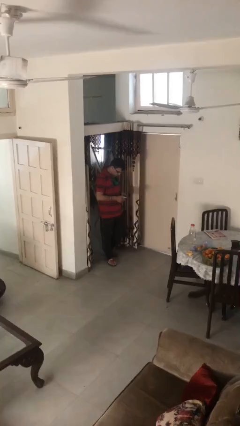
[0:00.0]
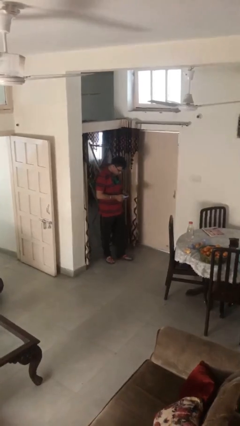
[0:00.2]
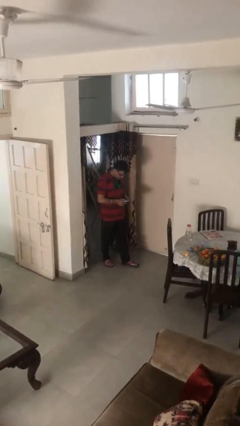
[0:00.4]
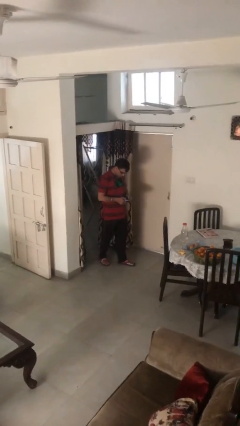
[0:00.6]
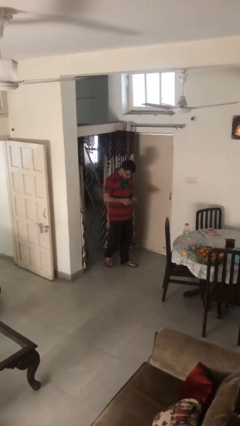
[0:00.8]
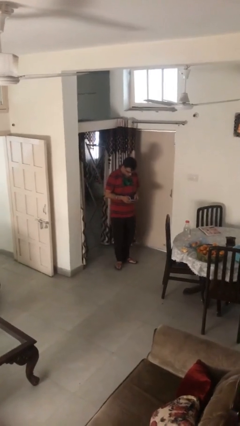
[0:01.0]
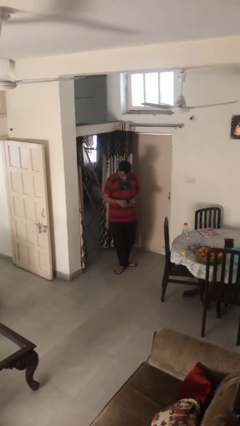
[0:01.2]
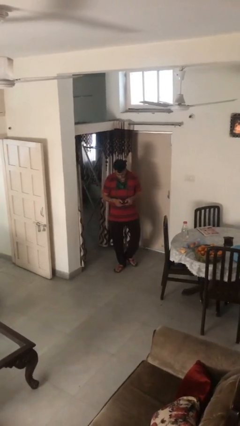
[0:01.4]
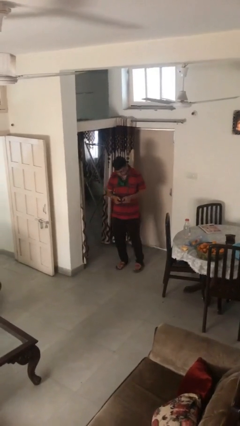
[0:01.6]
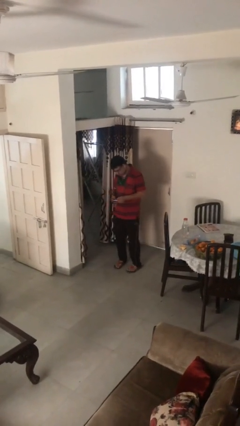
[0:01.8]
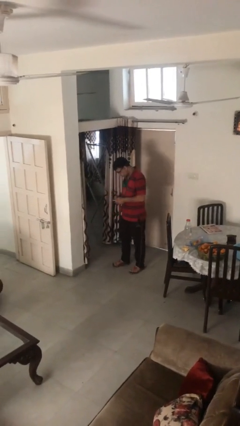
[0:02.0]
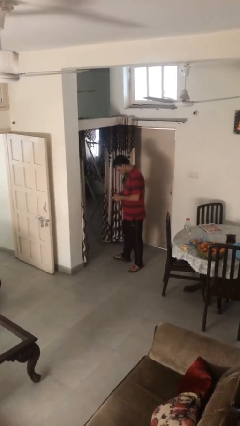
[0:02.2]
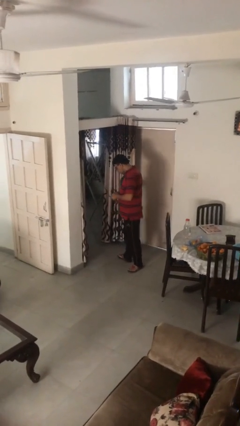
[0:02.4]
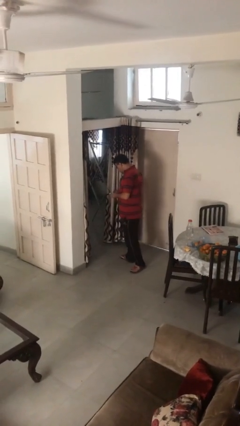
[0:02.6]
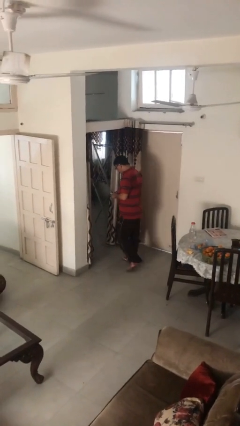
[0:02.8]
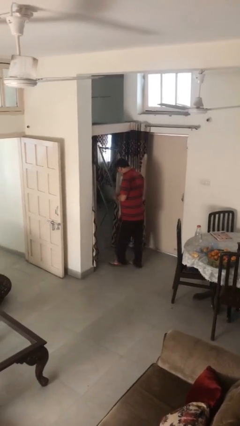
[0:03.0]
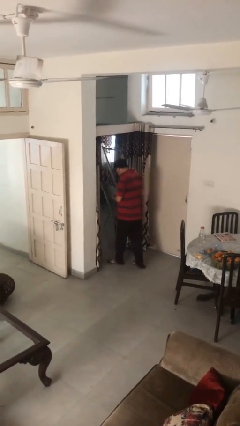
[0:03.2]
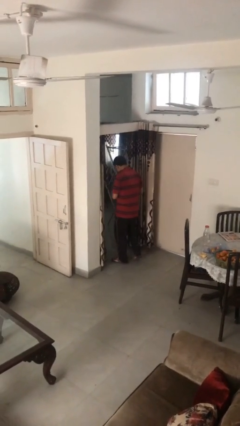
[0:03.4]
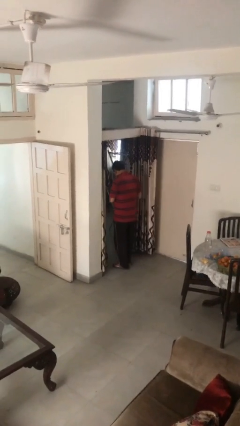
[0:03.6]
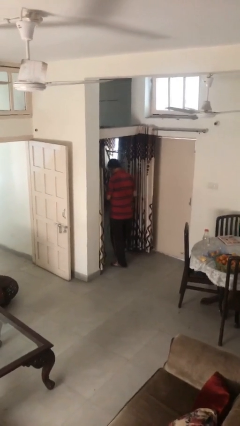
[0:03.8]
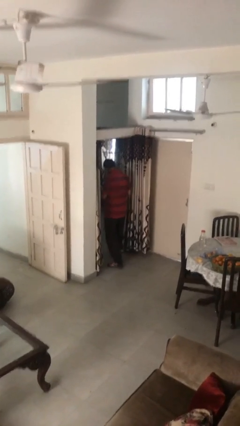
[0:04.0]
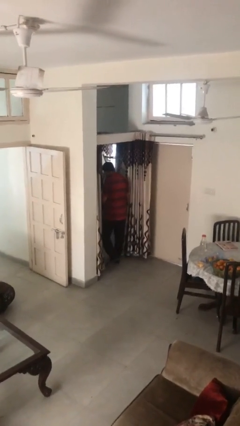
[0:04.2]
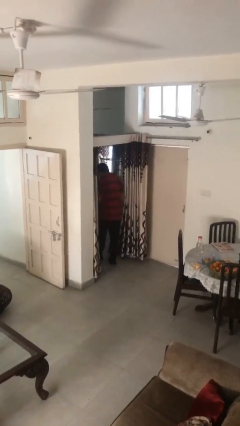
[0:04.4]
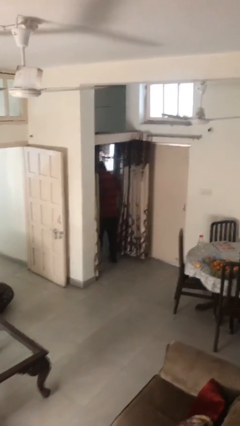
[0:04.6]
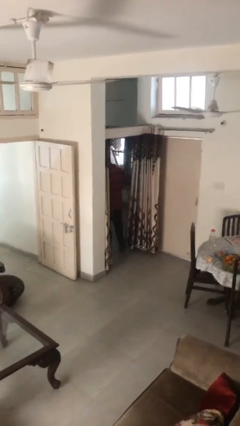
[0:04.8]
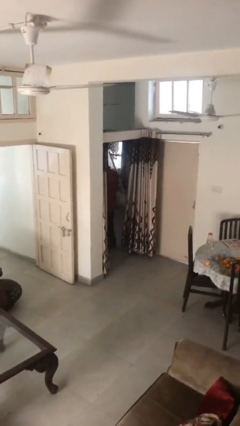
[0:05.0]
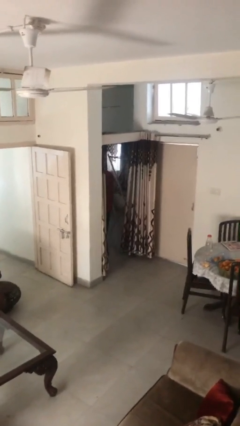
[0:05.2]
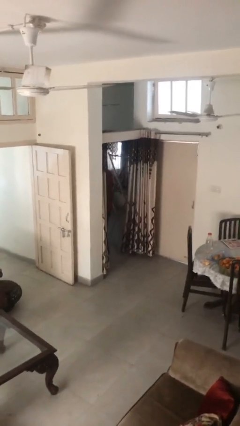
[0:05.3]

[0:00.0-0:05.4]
person exits scene through structure

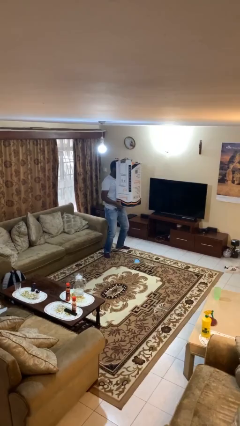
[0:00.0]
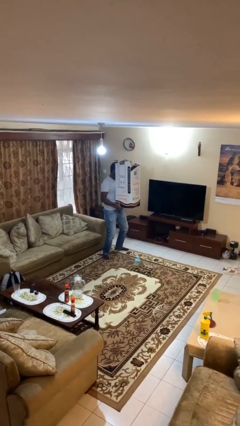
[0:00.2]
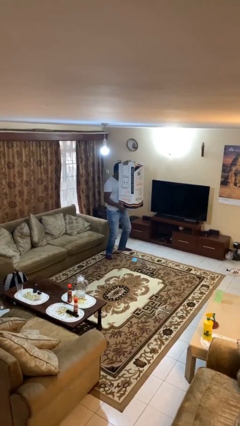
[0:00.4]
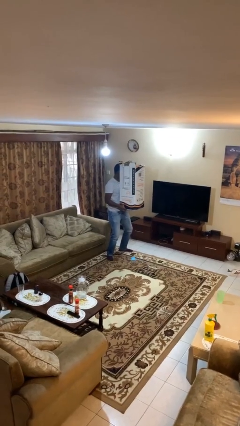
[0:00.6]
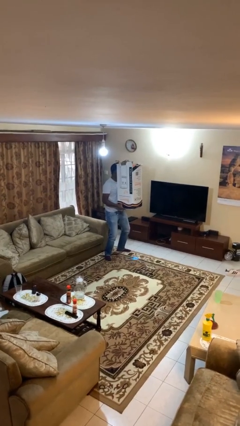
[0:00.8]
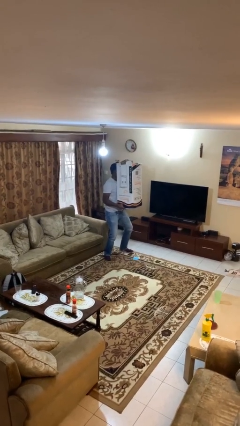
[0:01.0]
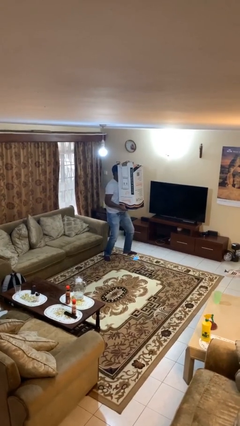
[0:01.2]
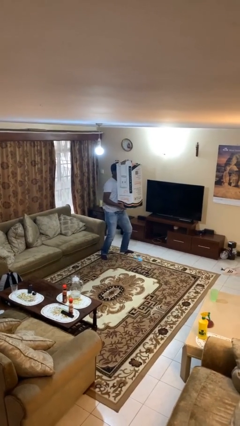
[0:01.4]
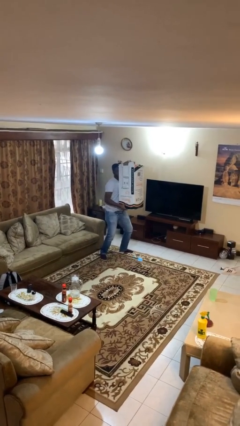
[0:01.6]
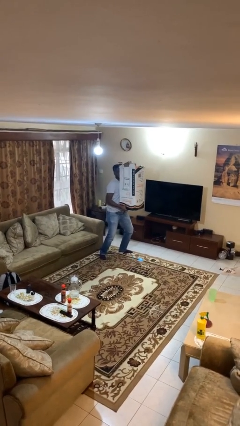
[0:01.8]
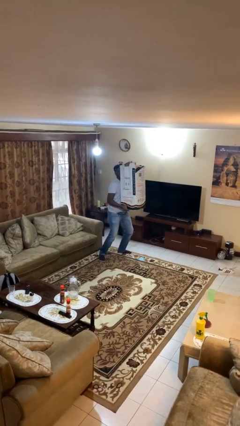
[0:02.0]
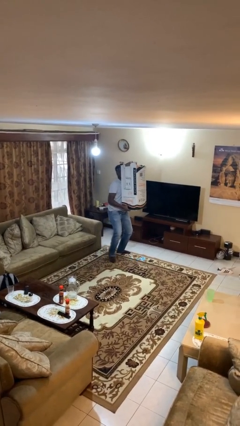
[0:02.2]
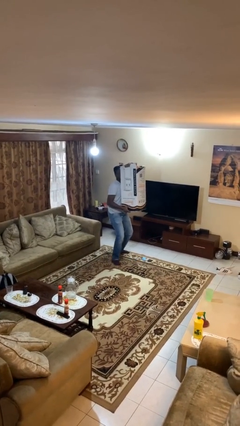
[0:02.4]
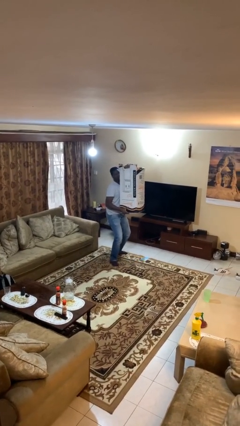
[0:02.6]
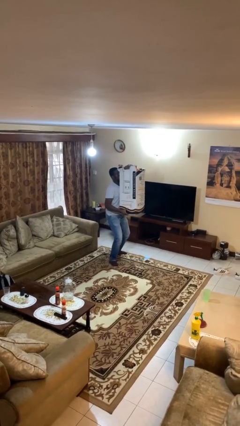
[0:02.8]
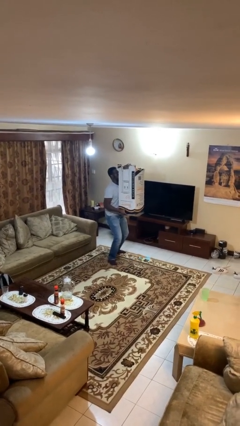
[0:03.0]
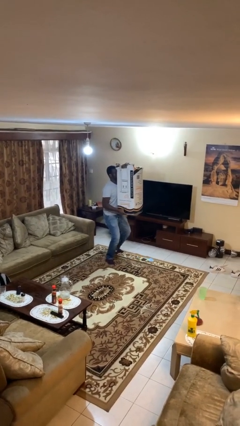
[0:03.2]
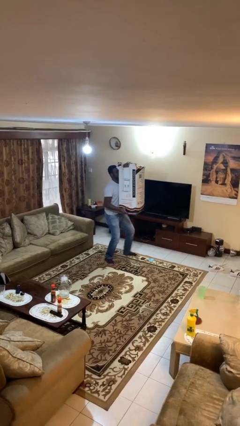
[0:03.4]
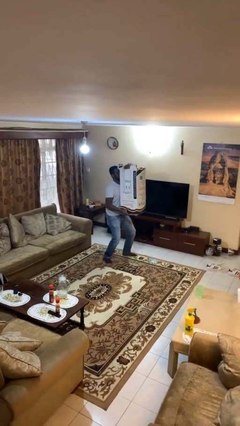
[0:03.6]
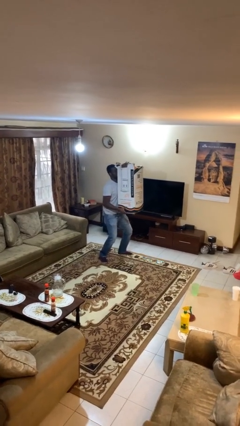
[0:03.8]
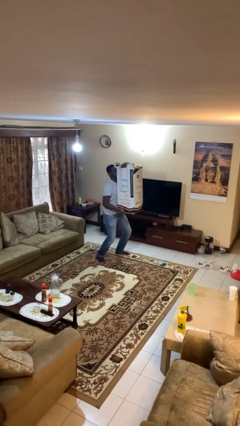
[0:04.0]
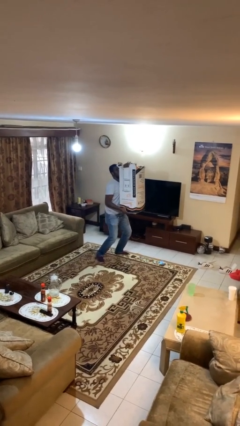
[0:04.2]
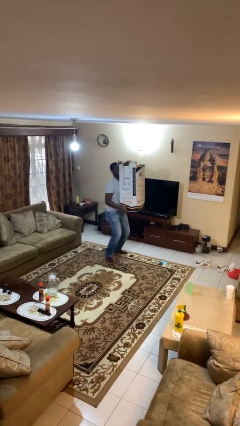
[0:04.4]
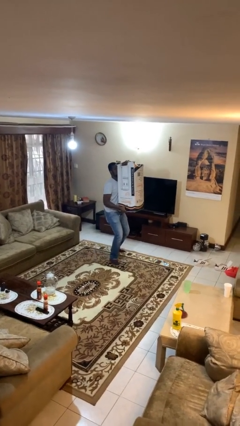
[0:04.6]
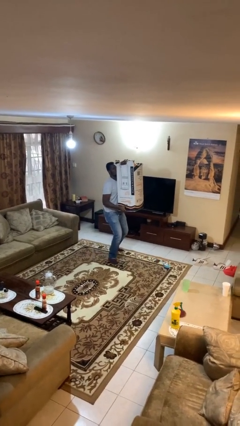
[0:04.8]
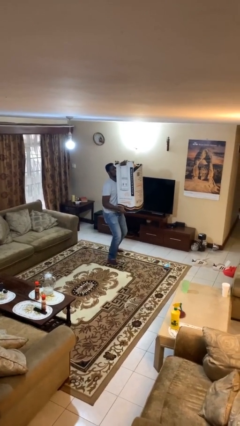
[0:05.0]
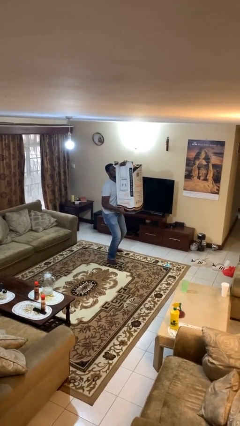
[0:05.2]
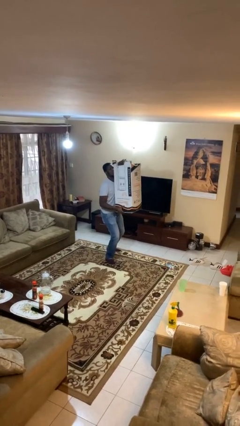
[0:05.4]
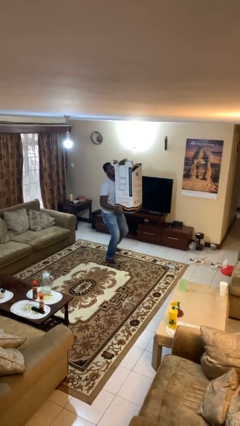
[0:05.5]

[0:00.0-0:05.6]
person carries heavy object

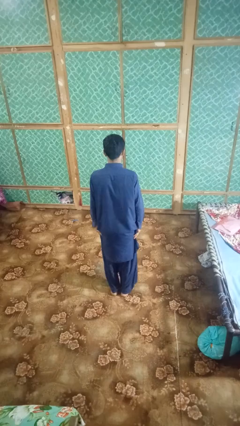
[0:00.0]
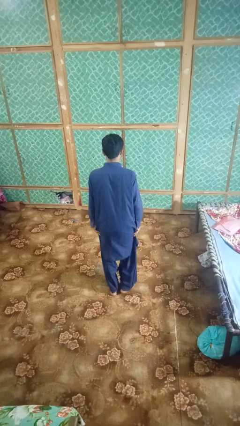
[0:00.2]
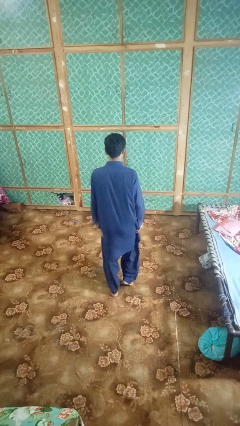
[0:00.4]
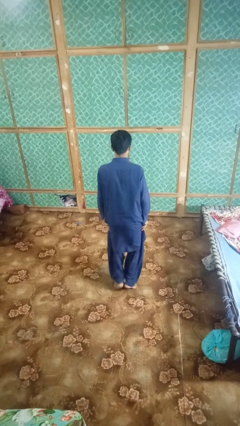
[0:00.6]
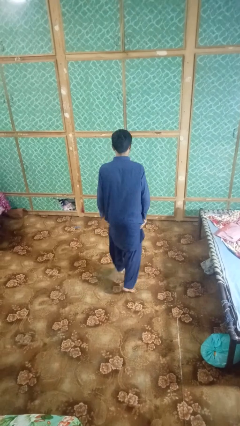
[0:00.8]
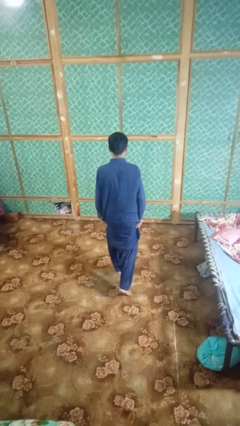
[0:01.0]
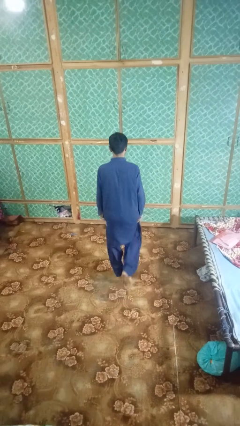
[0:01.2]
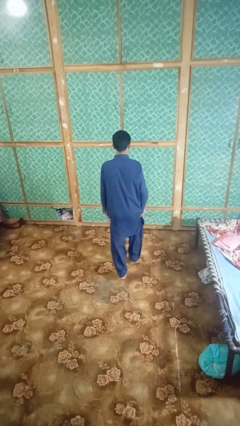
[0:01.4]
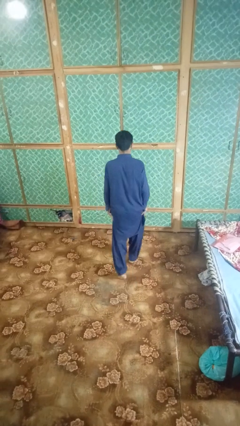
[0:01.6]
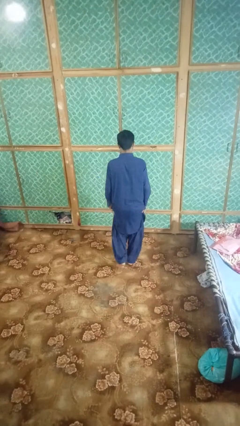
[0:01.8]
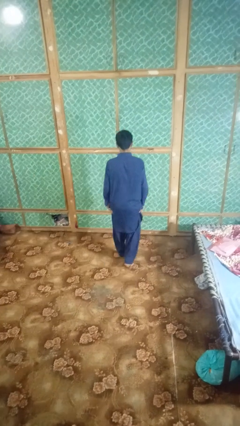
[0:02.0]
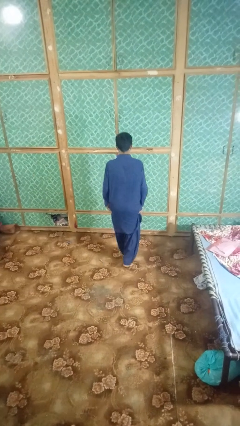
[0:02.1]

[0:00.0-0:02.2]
person walks tiptoe

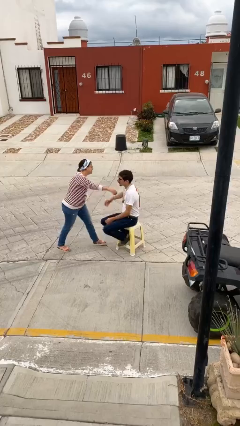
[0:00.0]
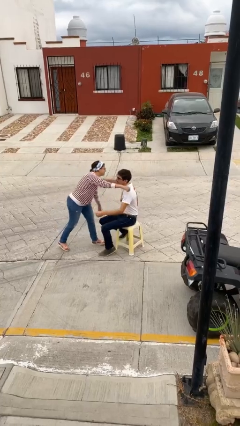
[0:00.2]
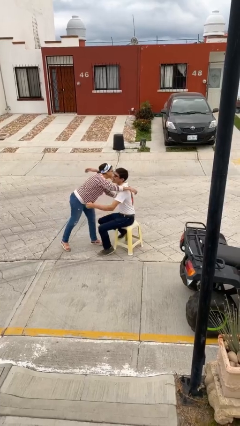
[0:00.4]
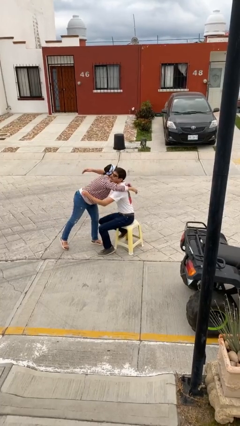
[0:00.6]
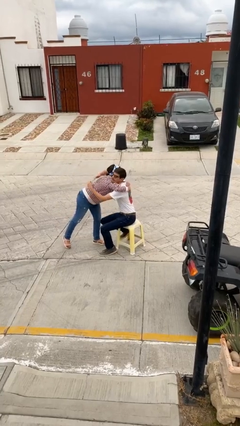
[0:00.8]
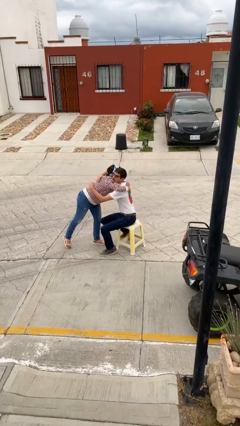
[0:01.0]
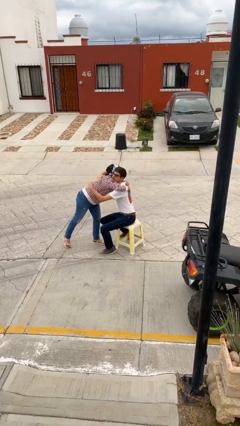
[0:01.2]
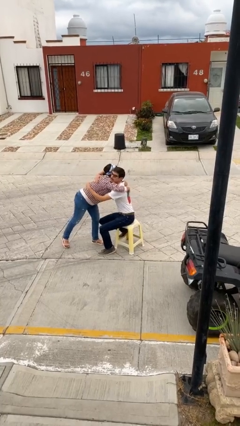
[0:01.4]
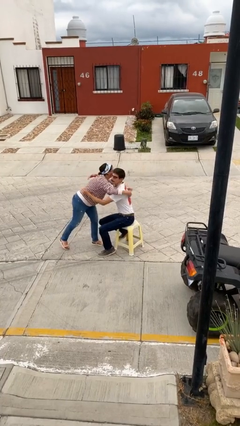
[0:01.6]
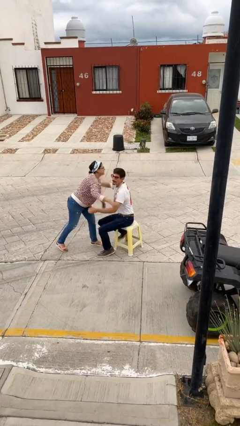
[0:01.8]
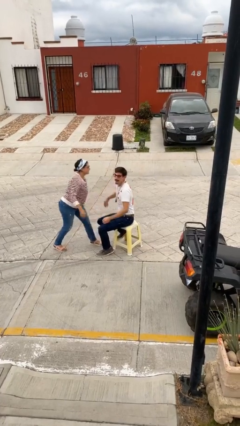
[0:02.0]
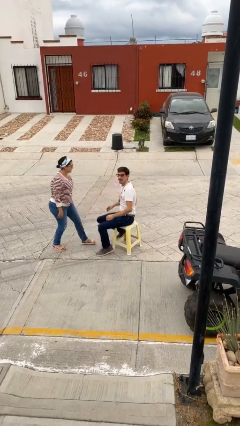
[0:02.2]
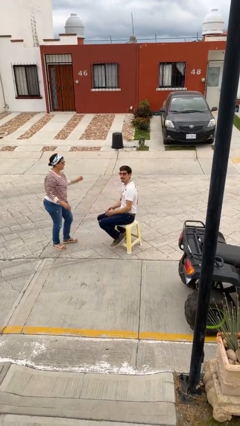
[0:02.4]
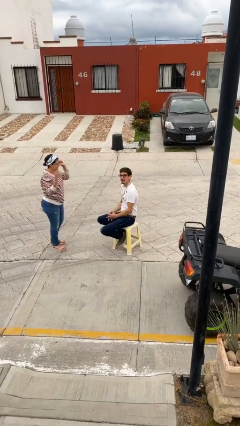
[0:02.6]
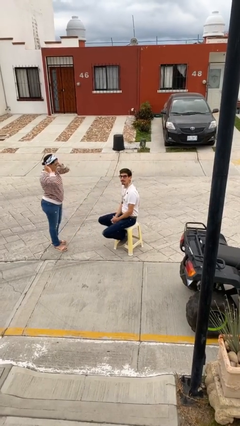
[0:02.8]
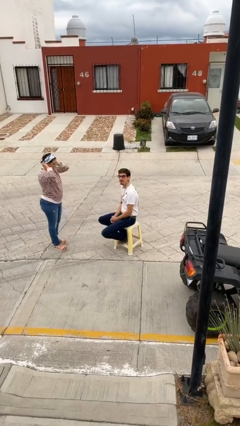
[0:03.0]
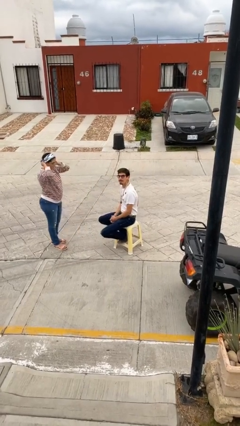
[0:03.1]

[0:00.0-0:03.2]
person embraces person

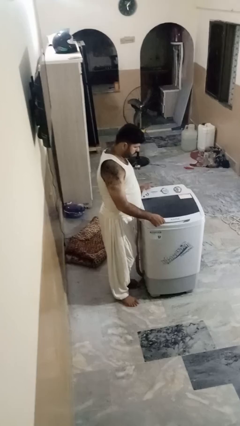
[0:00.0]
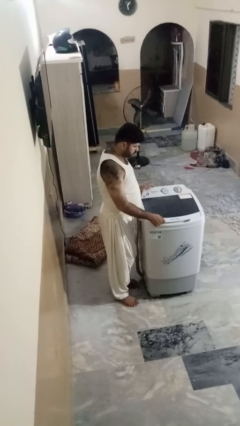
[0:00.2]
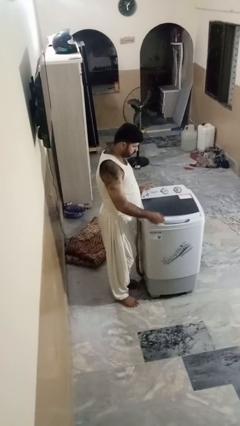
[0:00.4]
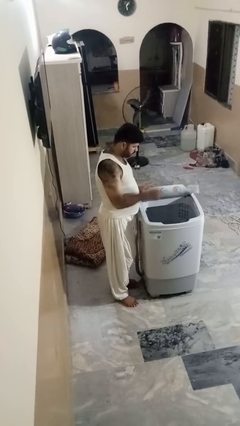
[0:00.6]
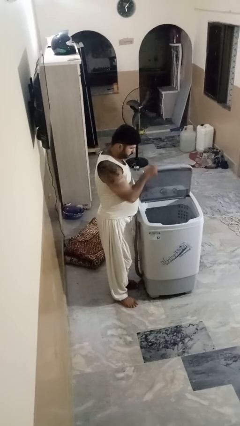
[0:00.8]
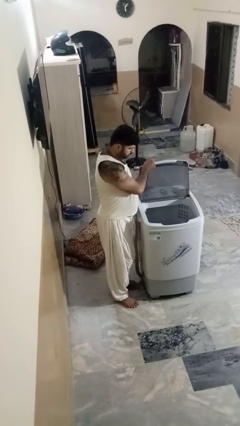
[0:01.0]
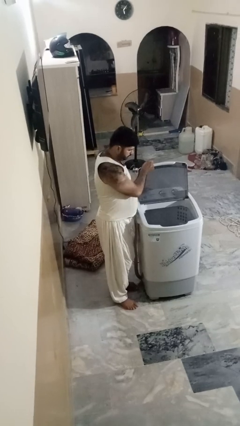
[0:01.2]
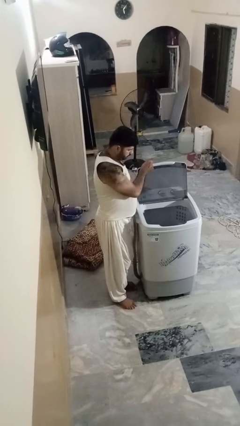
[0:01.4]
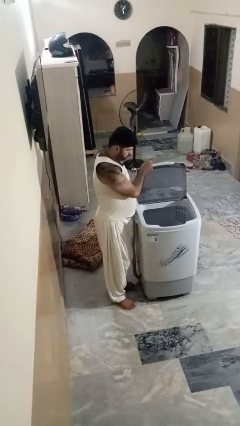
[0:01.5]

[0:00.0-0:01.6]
person opens clothes washer
